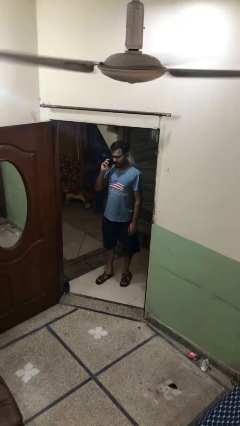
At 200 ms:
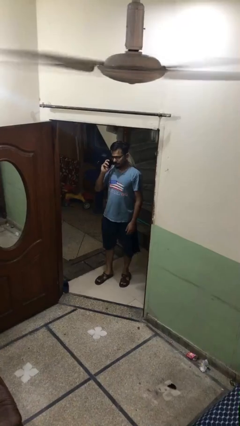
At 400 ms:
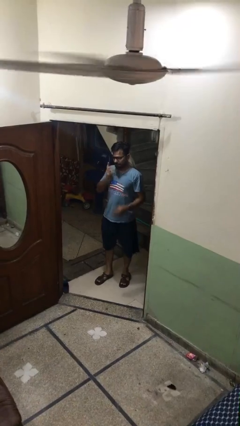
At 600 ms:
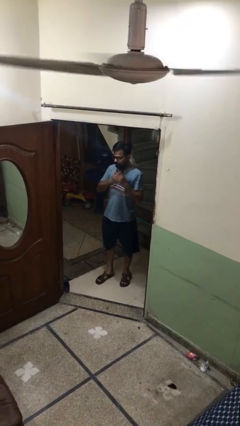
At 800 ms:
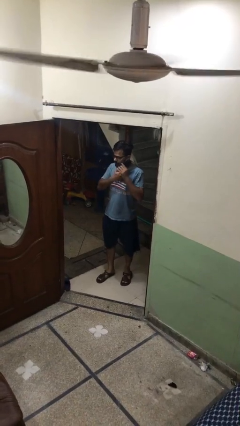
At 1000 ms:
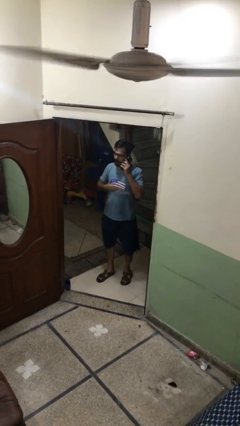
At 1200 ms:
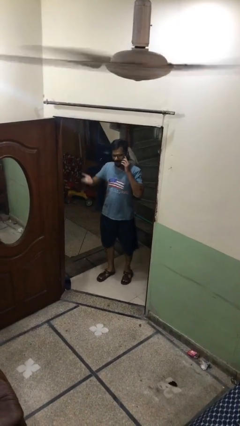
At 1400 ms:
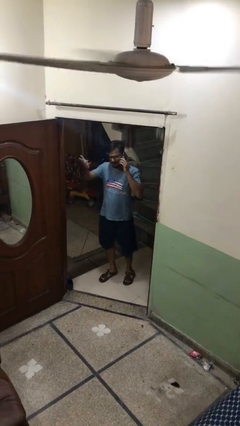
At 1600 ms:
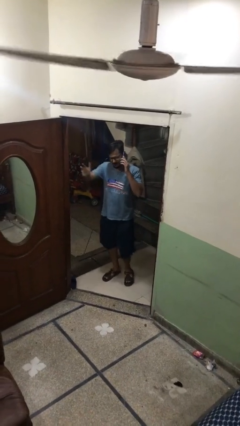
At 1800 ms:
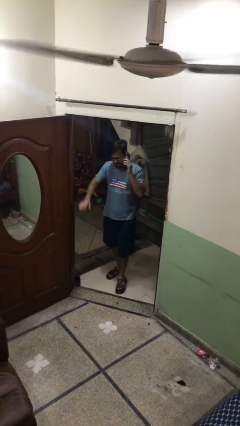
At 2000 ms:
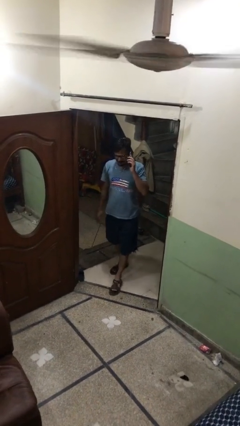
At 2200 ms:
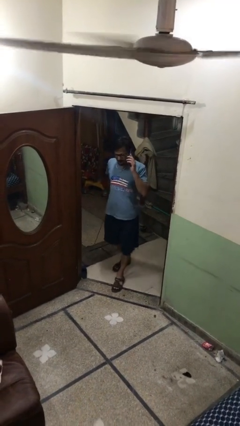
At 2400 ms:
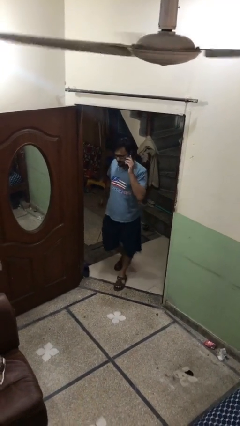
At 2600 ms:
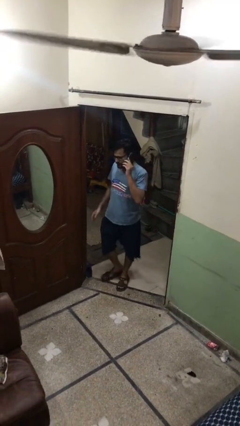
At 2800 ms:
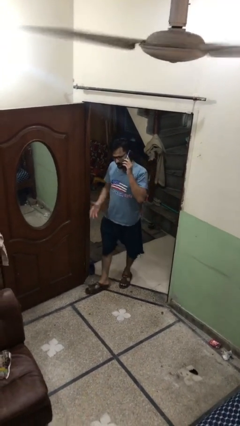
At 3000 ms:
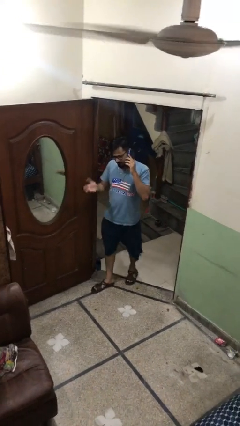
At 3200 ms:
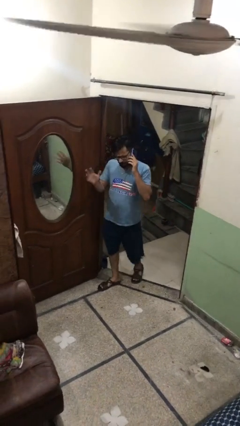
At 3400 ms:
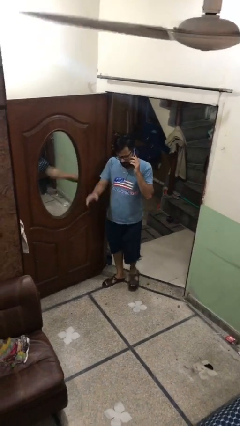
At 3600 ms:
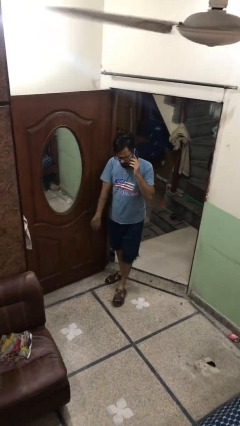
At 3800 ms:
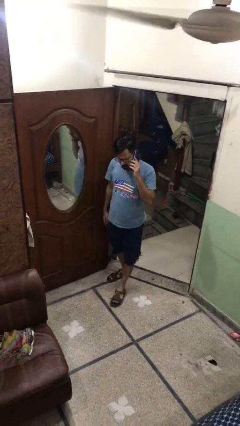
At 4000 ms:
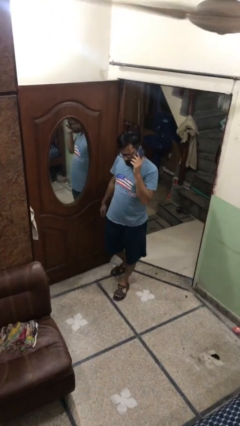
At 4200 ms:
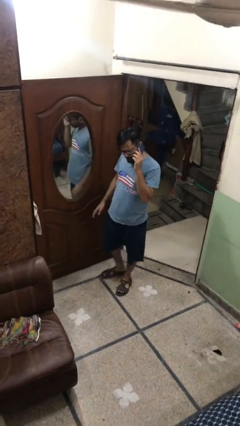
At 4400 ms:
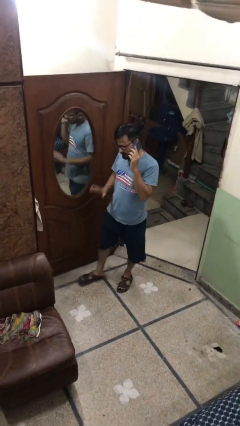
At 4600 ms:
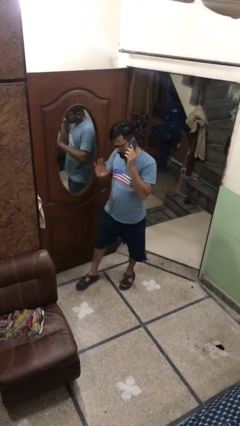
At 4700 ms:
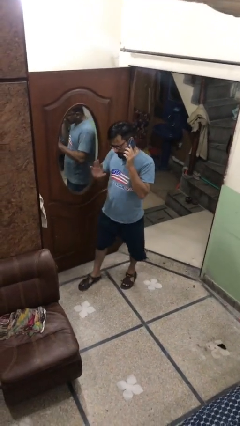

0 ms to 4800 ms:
person enters scene through structure

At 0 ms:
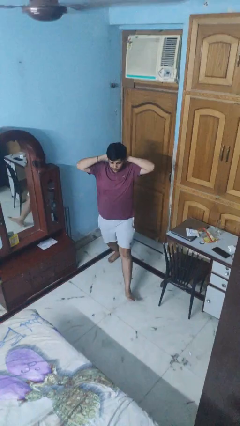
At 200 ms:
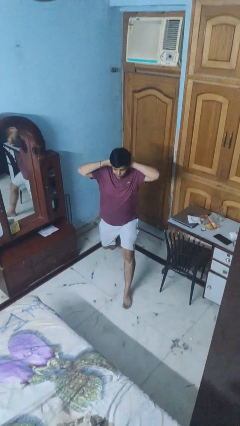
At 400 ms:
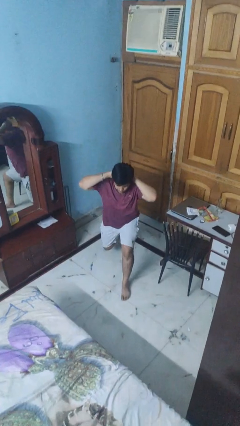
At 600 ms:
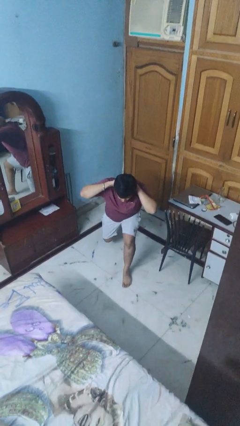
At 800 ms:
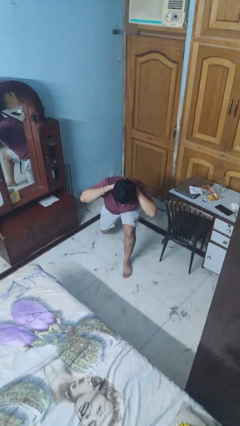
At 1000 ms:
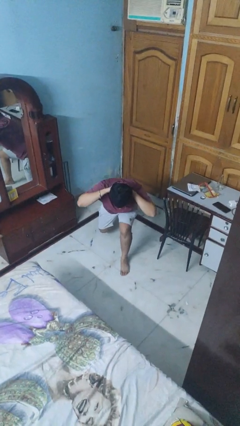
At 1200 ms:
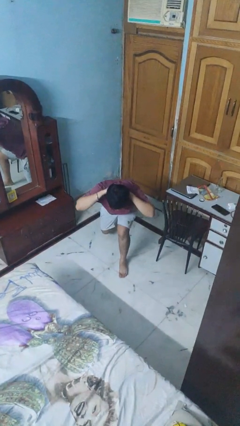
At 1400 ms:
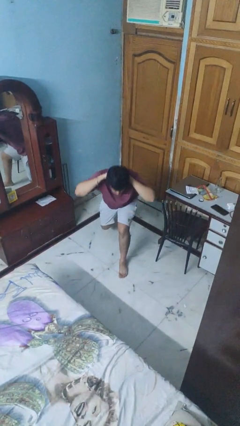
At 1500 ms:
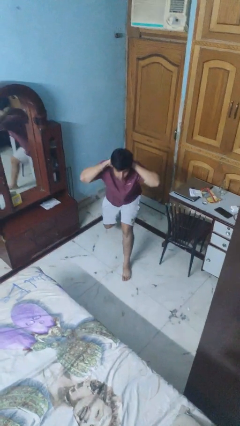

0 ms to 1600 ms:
person exercises with lunges

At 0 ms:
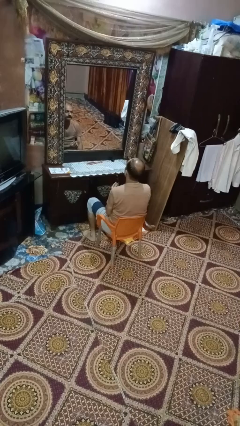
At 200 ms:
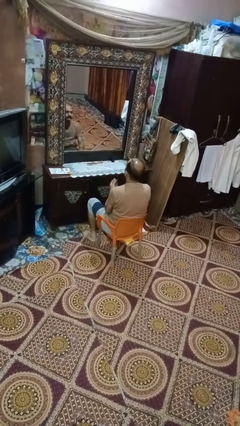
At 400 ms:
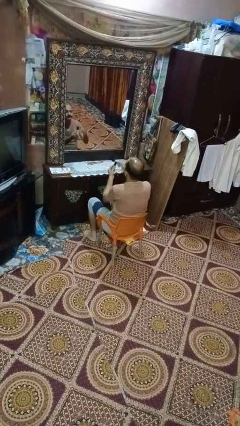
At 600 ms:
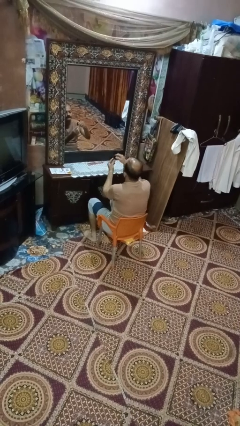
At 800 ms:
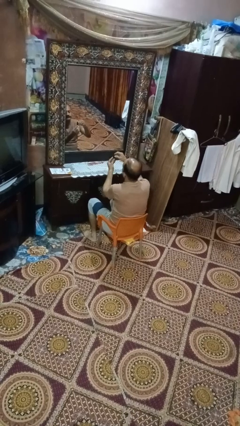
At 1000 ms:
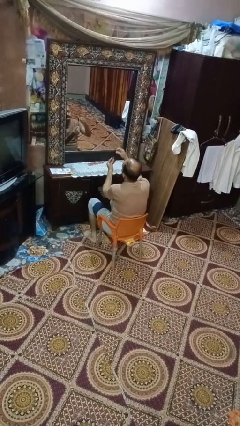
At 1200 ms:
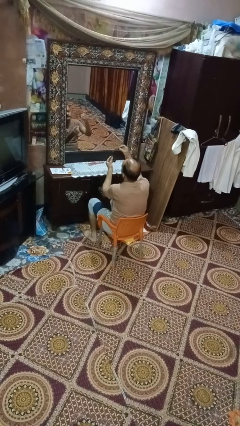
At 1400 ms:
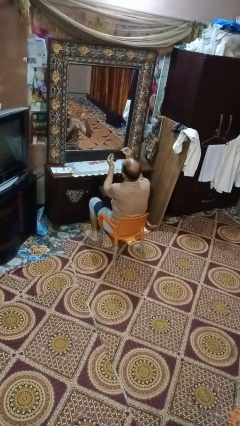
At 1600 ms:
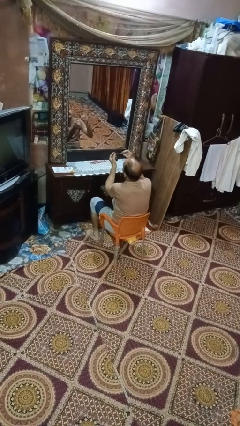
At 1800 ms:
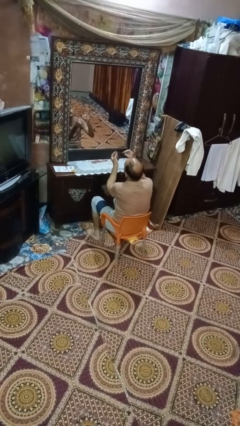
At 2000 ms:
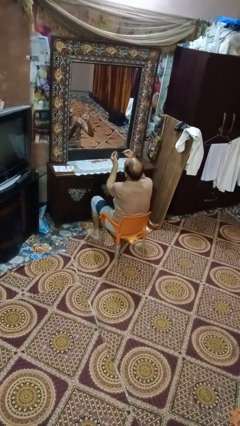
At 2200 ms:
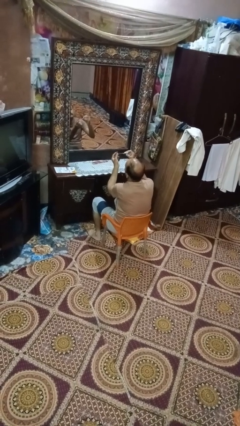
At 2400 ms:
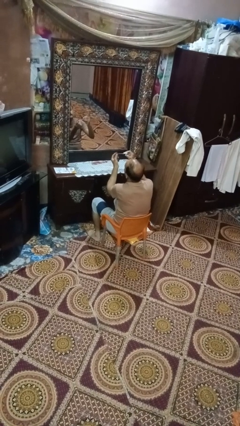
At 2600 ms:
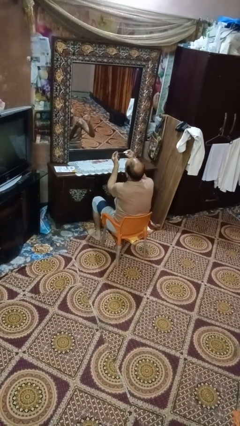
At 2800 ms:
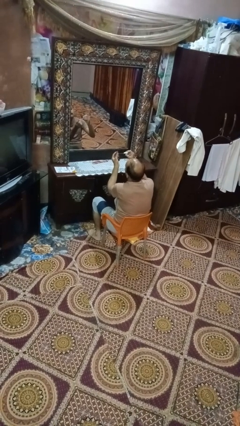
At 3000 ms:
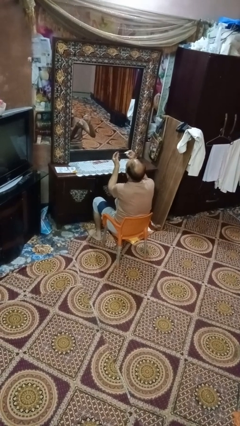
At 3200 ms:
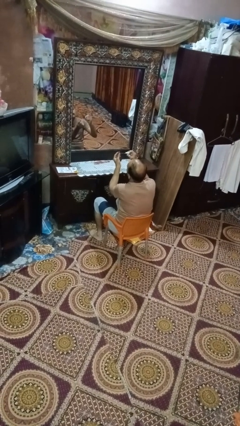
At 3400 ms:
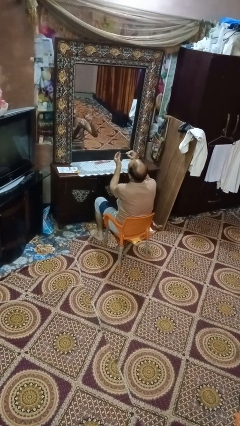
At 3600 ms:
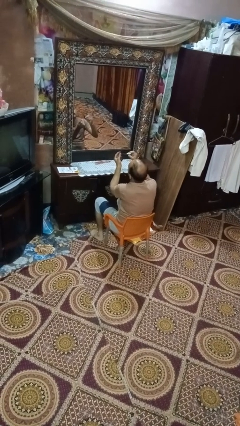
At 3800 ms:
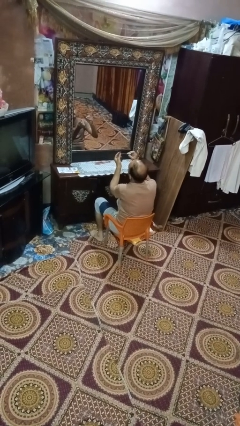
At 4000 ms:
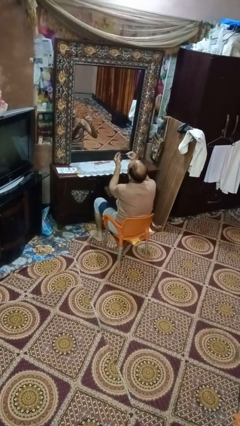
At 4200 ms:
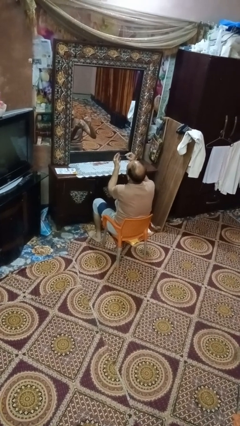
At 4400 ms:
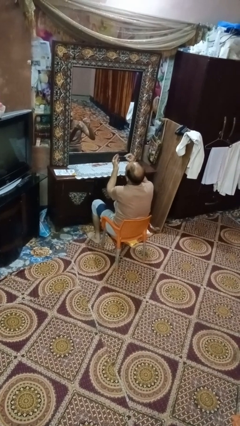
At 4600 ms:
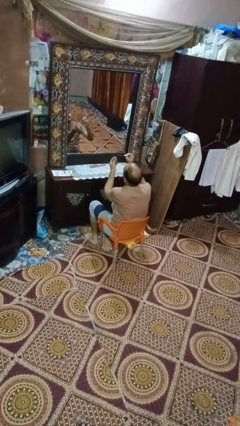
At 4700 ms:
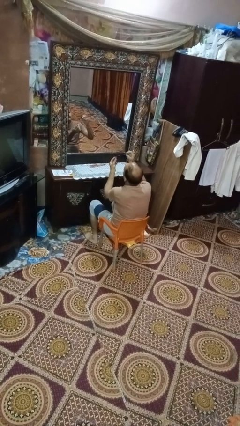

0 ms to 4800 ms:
person paints fingernails

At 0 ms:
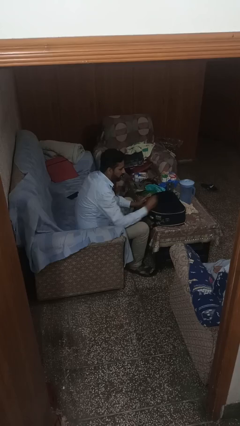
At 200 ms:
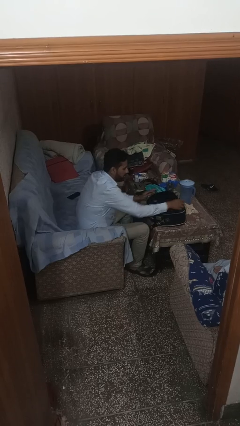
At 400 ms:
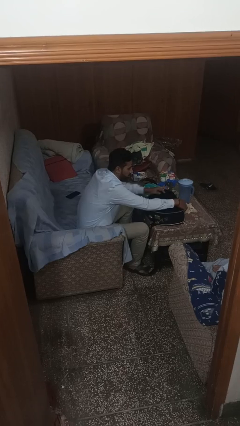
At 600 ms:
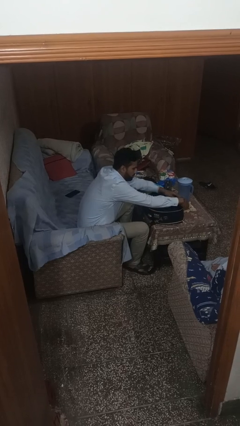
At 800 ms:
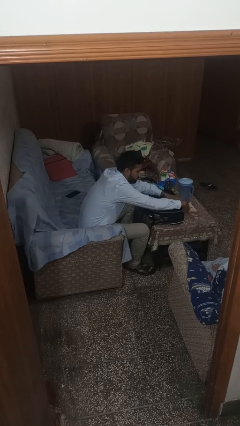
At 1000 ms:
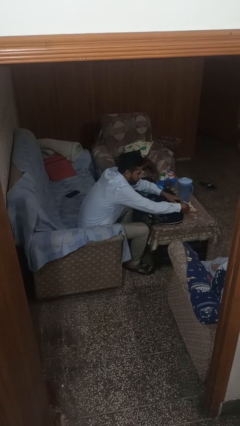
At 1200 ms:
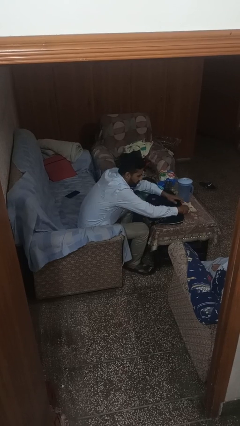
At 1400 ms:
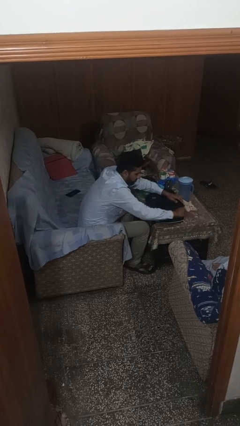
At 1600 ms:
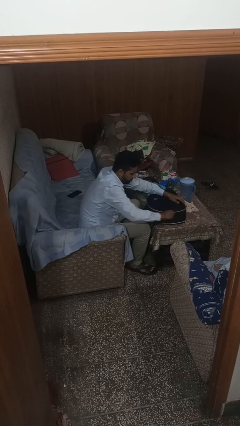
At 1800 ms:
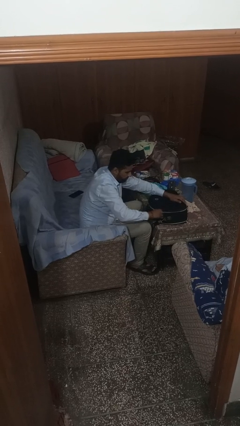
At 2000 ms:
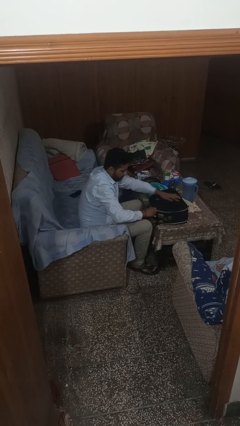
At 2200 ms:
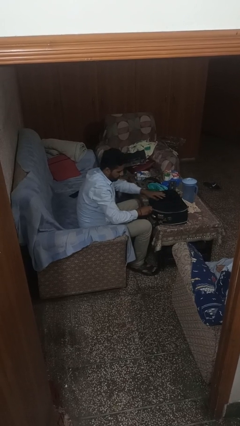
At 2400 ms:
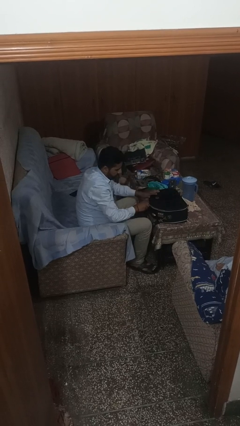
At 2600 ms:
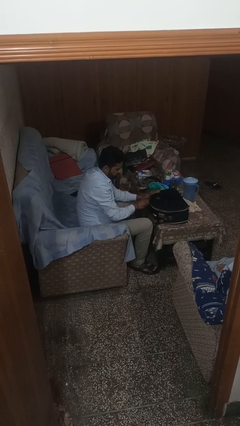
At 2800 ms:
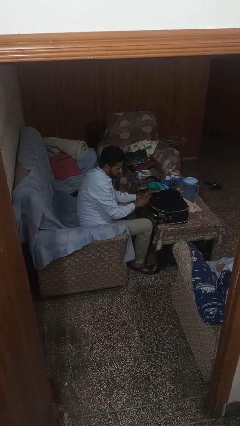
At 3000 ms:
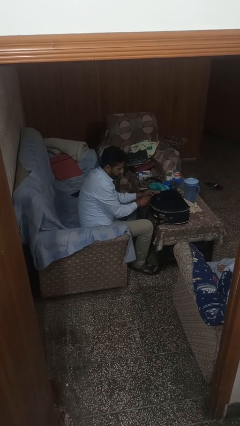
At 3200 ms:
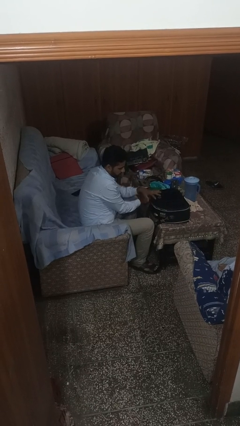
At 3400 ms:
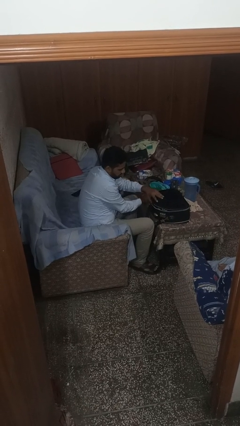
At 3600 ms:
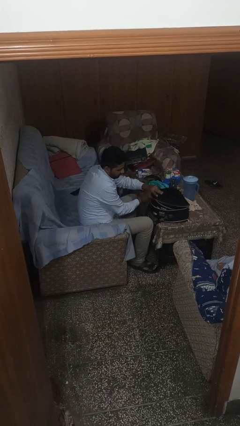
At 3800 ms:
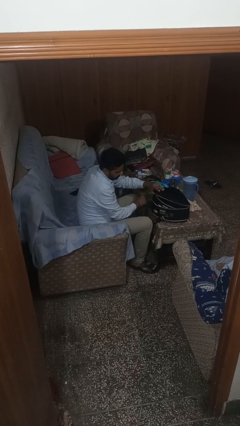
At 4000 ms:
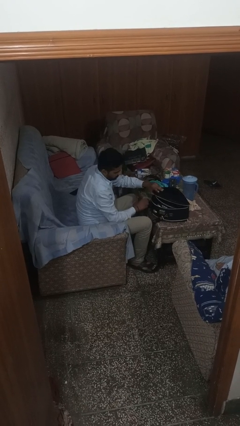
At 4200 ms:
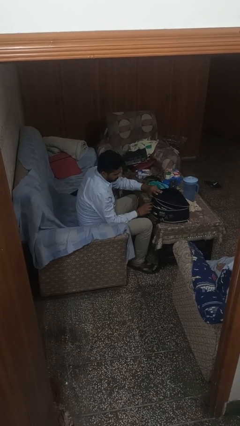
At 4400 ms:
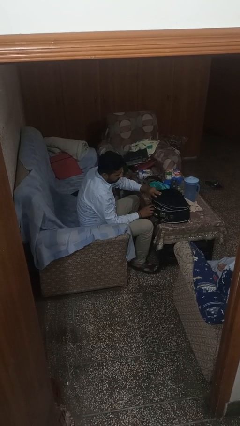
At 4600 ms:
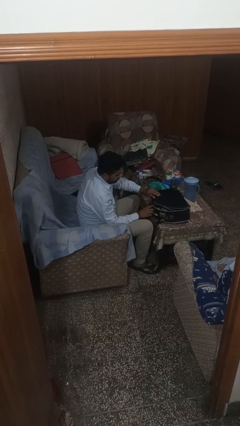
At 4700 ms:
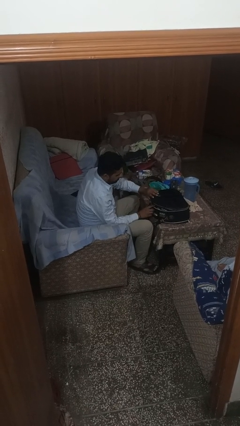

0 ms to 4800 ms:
person opens suitcase

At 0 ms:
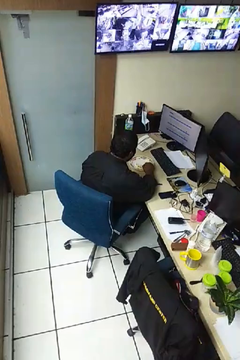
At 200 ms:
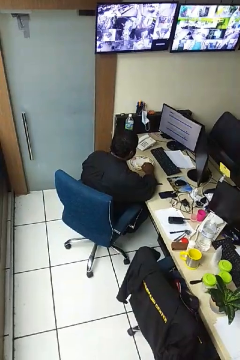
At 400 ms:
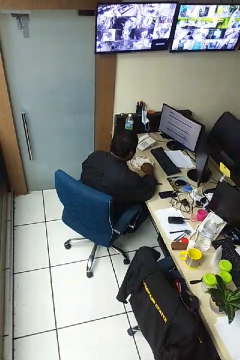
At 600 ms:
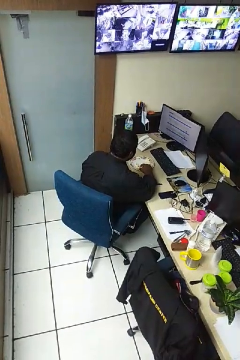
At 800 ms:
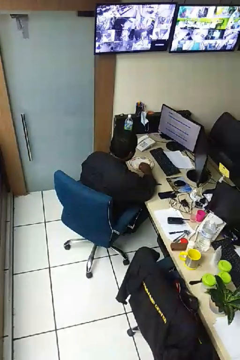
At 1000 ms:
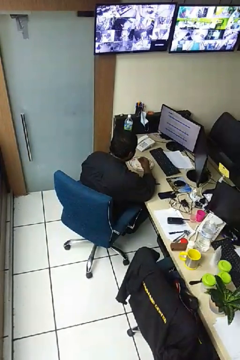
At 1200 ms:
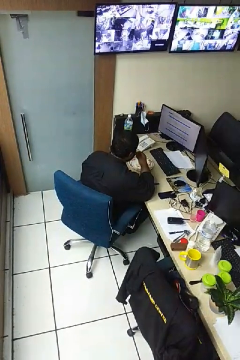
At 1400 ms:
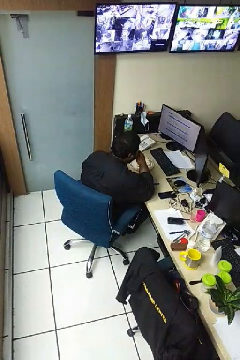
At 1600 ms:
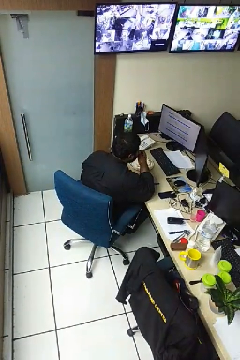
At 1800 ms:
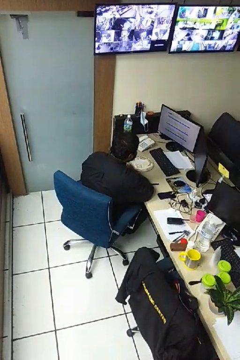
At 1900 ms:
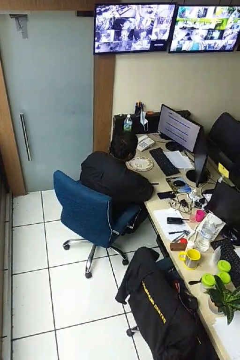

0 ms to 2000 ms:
person eats with hands
